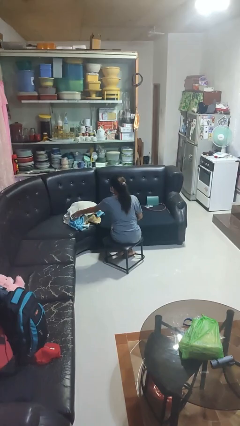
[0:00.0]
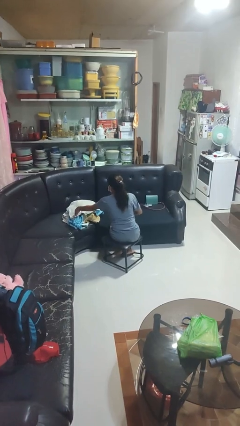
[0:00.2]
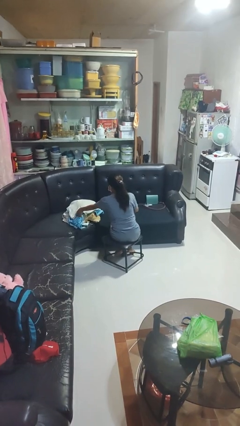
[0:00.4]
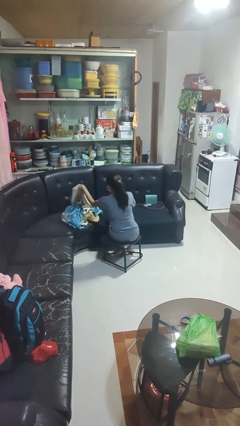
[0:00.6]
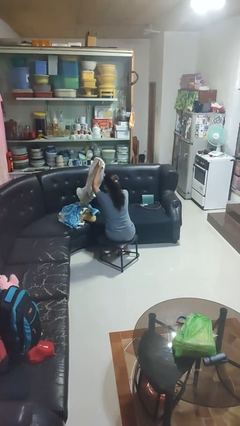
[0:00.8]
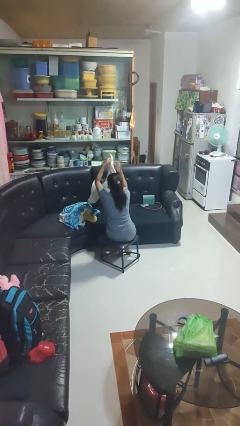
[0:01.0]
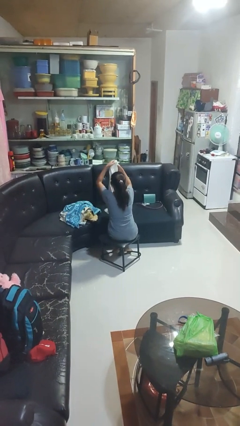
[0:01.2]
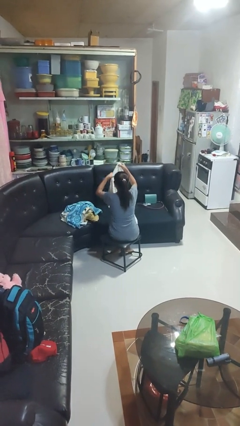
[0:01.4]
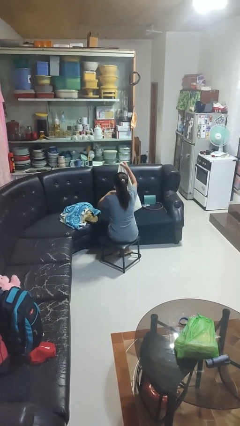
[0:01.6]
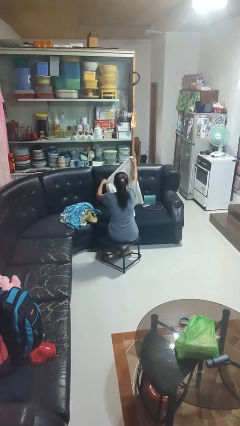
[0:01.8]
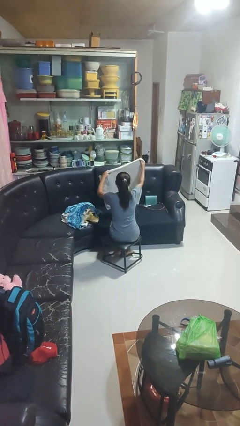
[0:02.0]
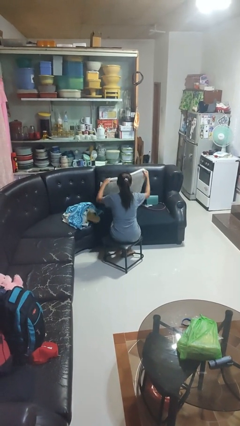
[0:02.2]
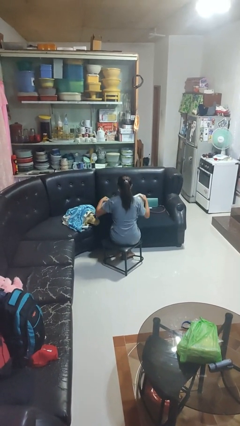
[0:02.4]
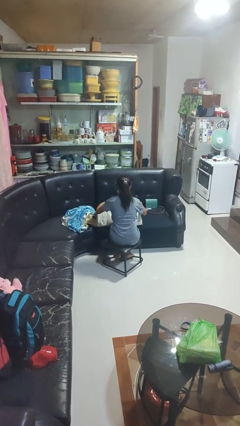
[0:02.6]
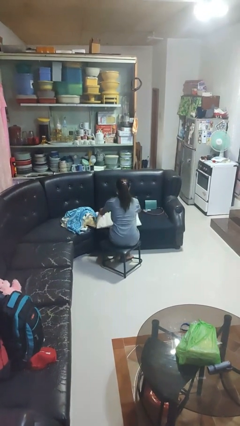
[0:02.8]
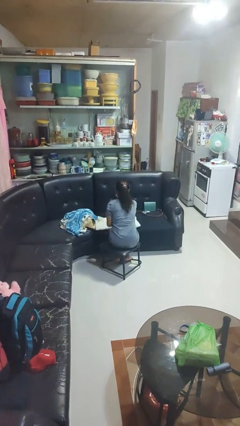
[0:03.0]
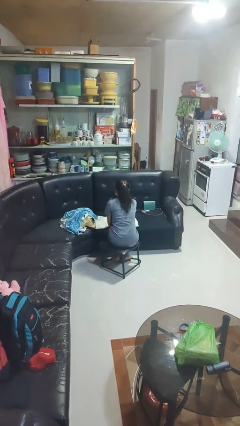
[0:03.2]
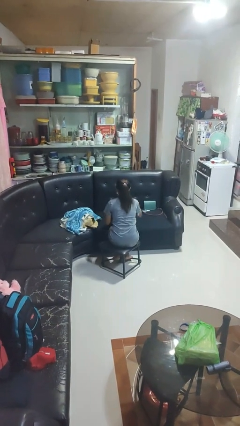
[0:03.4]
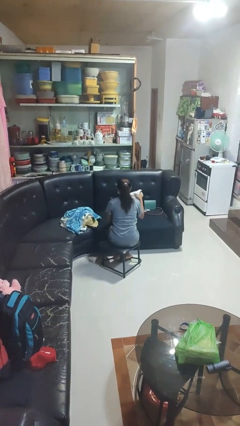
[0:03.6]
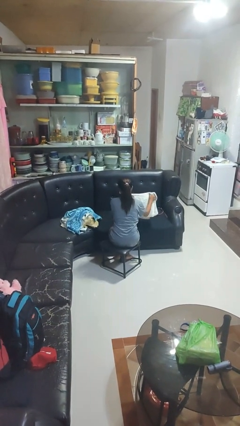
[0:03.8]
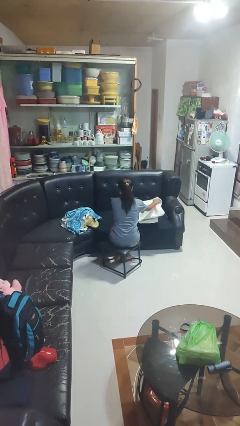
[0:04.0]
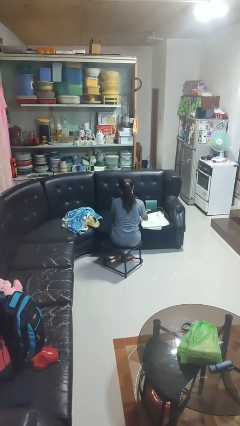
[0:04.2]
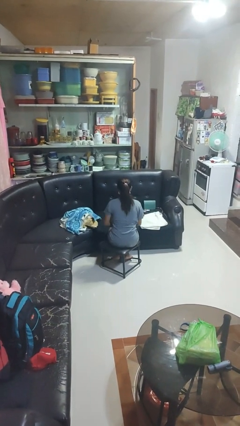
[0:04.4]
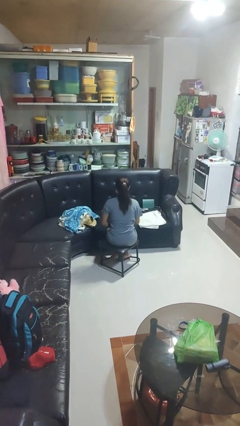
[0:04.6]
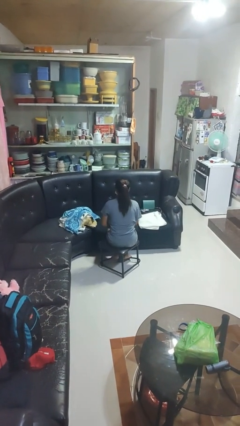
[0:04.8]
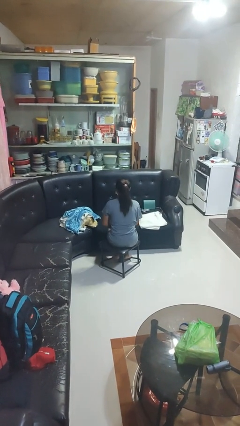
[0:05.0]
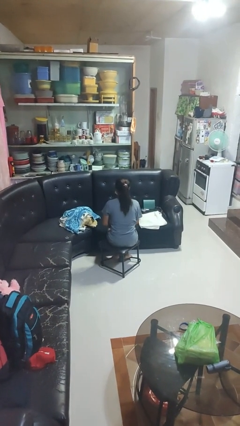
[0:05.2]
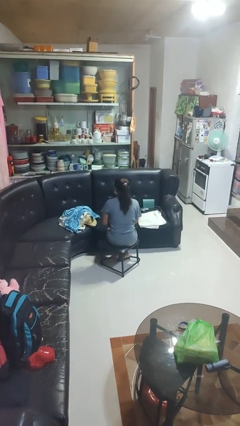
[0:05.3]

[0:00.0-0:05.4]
person folds towel

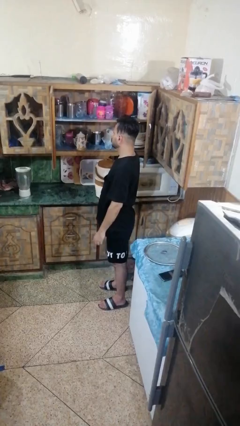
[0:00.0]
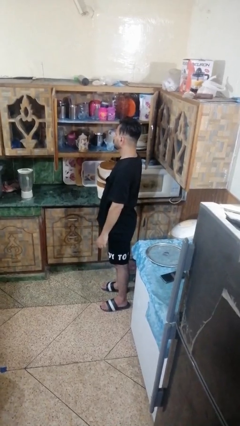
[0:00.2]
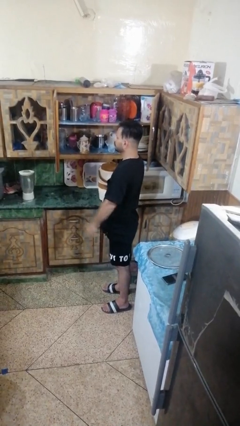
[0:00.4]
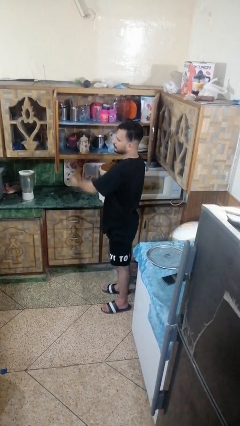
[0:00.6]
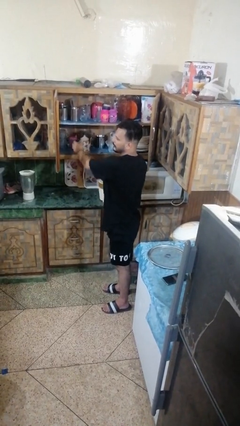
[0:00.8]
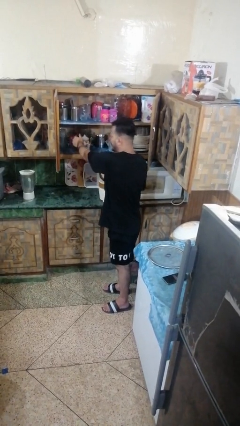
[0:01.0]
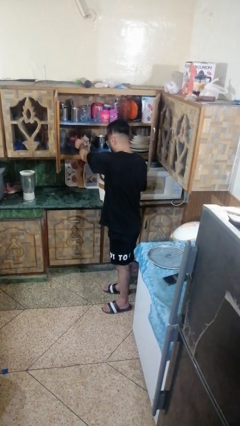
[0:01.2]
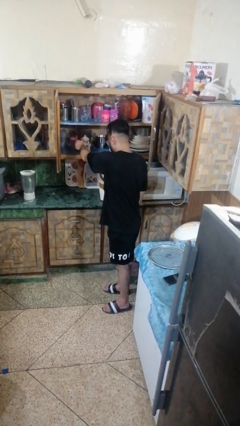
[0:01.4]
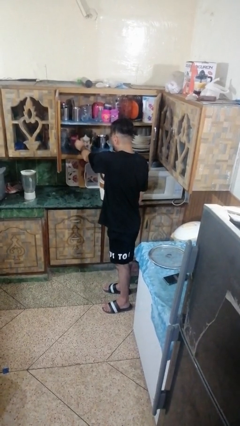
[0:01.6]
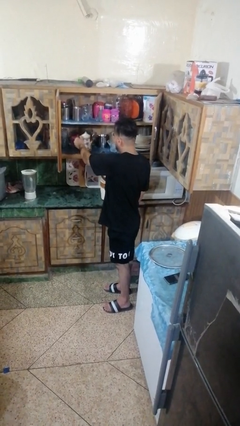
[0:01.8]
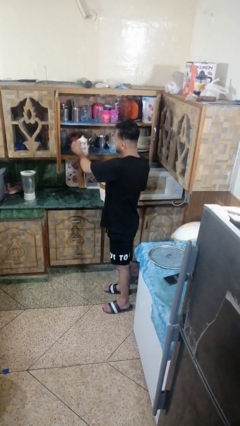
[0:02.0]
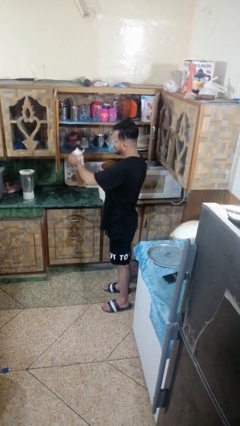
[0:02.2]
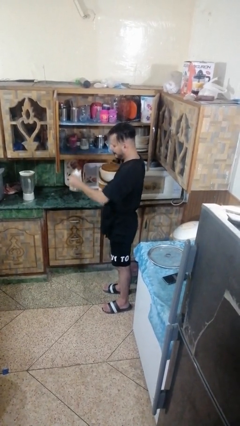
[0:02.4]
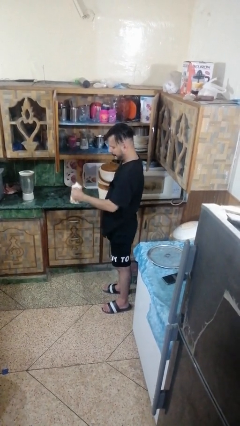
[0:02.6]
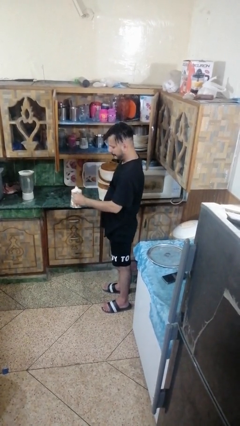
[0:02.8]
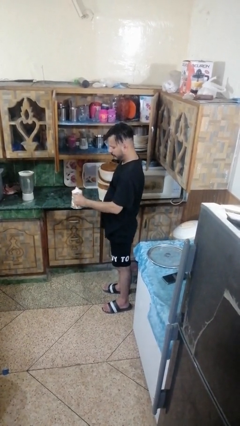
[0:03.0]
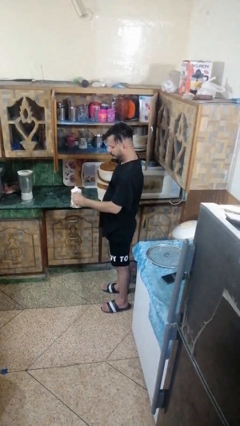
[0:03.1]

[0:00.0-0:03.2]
person picks up object from cabinet

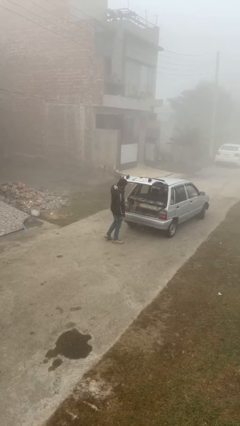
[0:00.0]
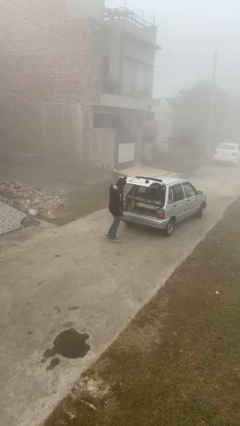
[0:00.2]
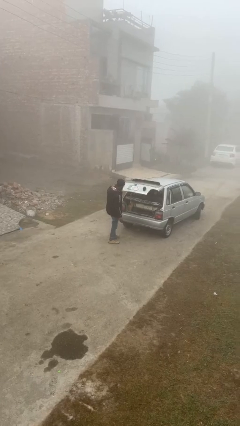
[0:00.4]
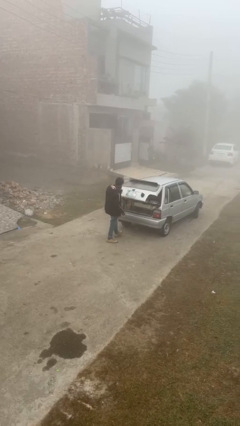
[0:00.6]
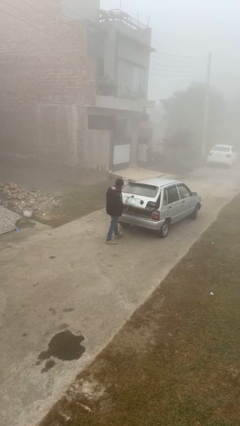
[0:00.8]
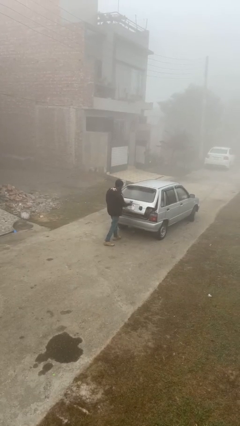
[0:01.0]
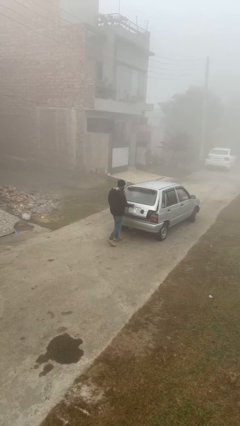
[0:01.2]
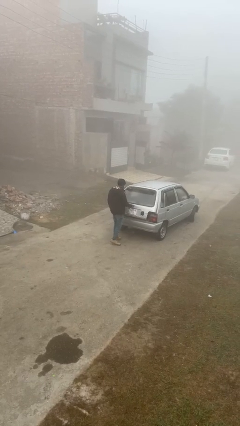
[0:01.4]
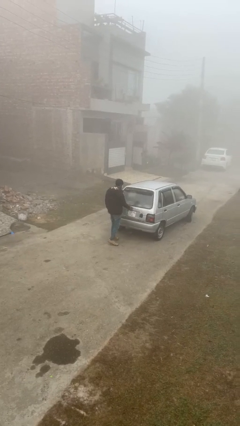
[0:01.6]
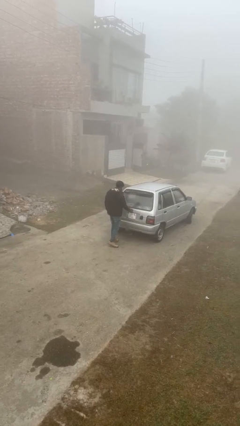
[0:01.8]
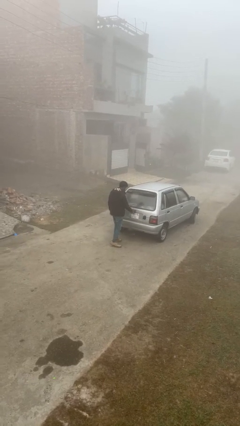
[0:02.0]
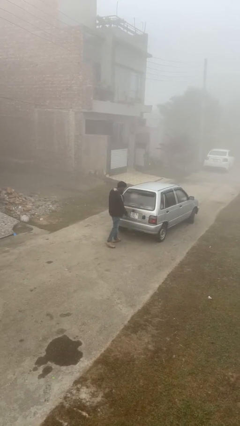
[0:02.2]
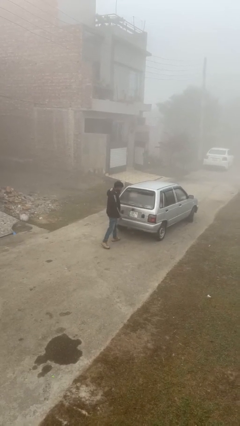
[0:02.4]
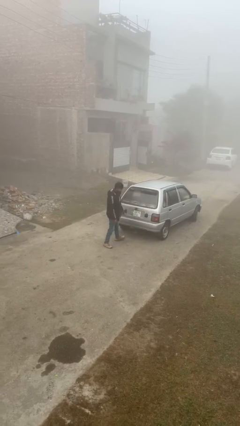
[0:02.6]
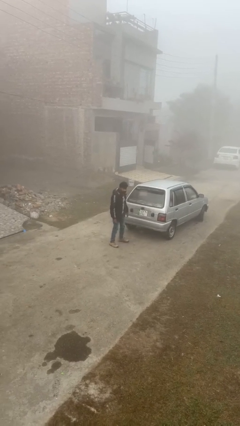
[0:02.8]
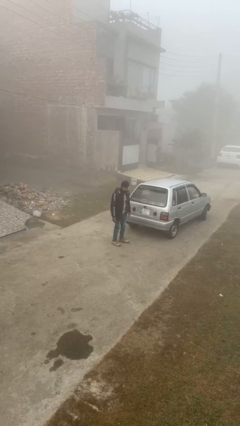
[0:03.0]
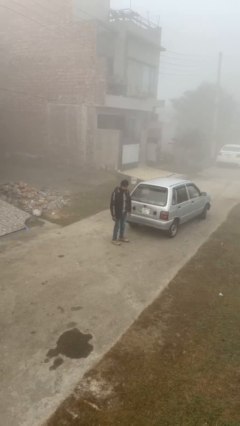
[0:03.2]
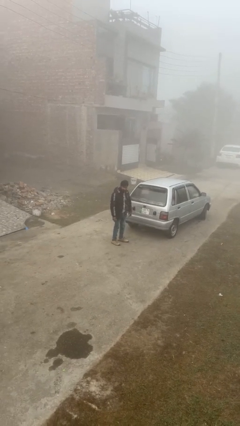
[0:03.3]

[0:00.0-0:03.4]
person closes car trunk

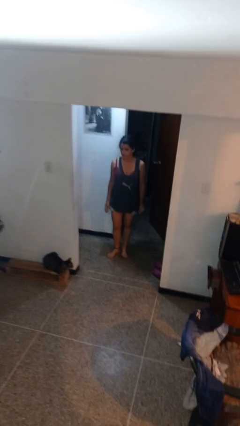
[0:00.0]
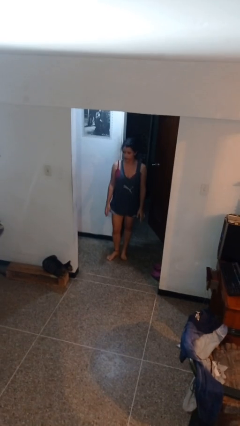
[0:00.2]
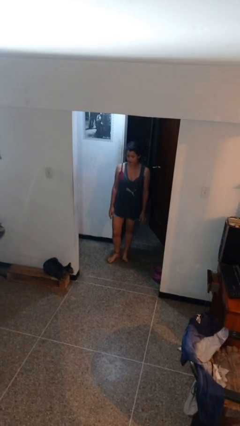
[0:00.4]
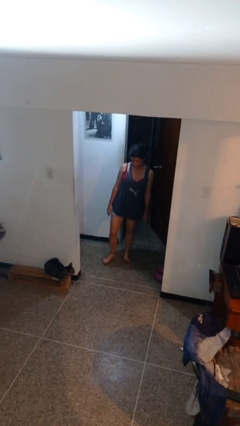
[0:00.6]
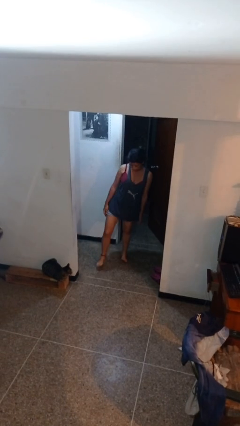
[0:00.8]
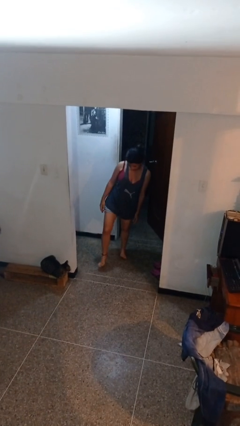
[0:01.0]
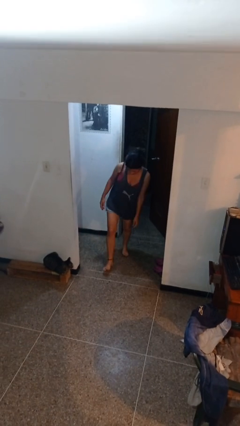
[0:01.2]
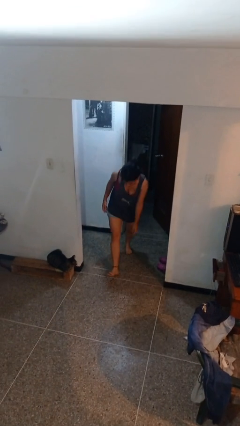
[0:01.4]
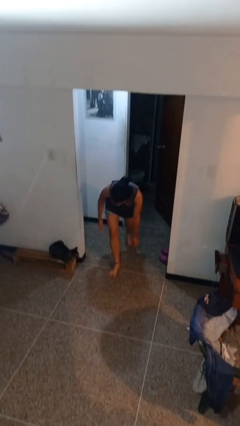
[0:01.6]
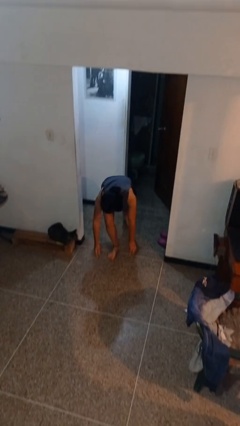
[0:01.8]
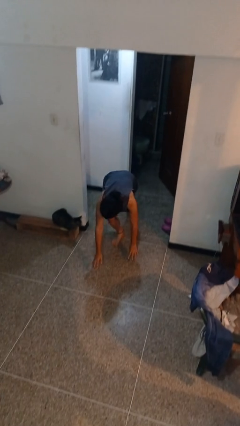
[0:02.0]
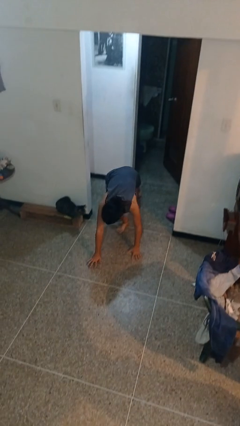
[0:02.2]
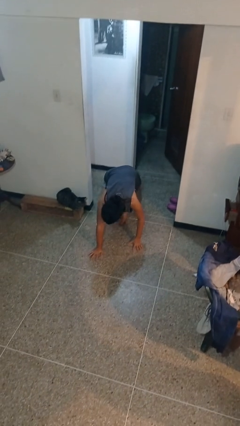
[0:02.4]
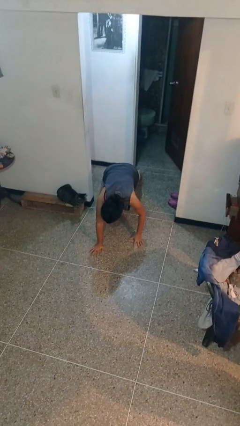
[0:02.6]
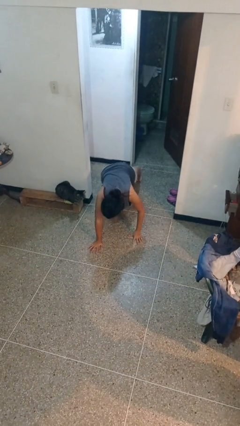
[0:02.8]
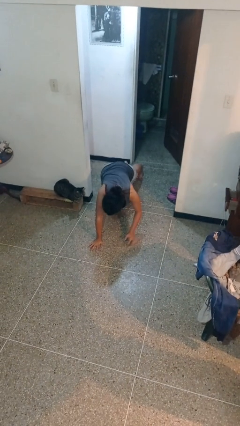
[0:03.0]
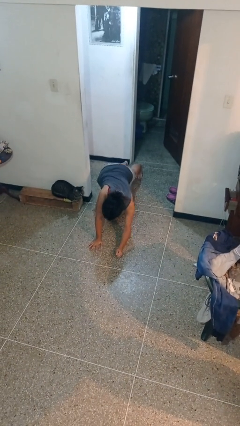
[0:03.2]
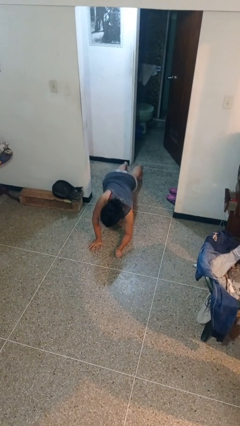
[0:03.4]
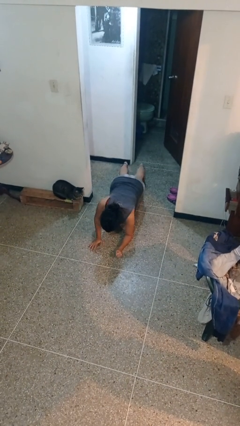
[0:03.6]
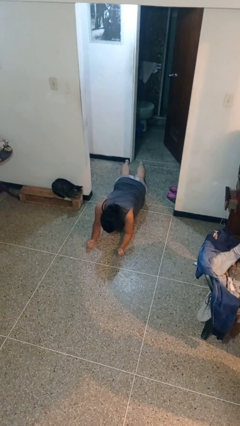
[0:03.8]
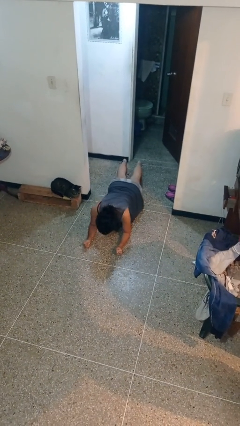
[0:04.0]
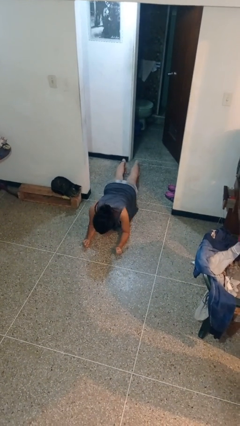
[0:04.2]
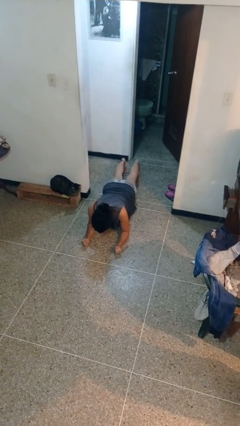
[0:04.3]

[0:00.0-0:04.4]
person exercises with plank

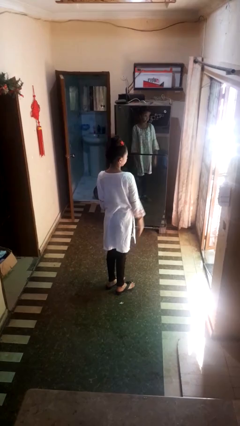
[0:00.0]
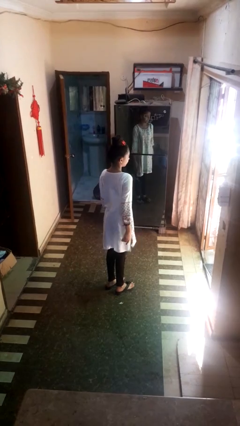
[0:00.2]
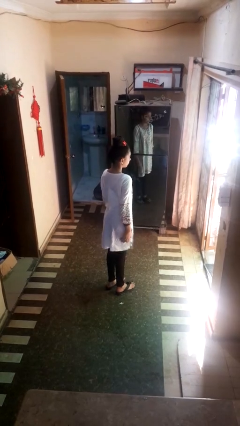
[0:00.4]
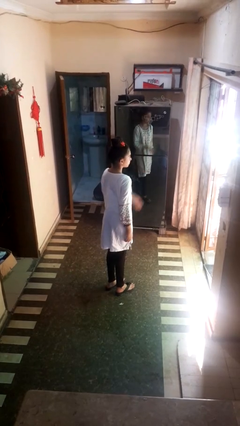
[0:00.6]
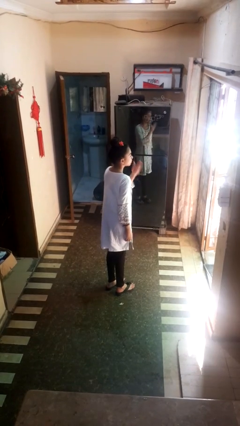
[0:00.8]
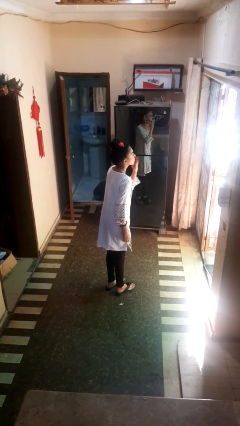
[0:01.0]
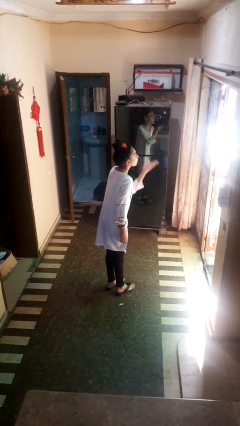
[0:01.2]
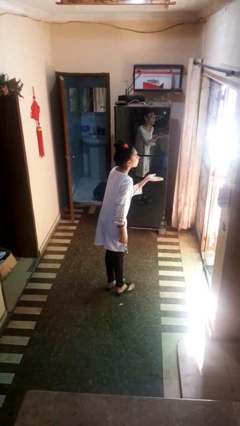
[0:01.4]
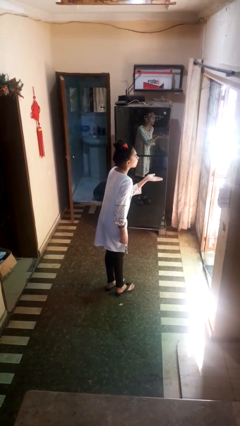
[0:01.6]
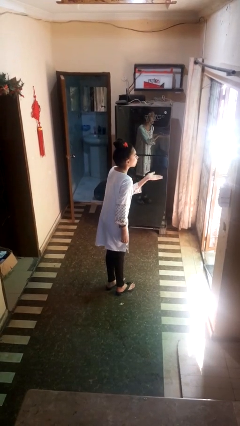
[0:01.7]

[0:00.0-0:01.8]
person gestures blow kiss
